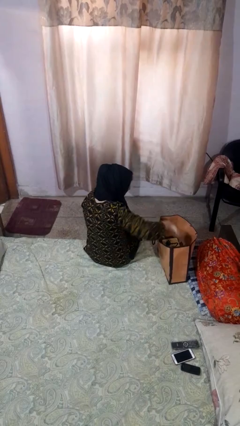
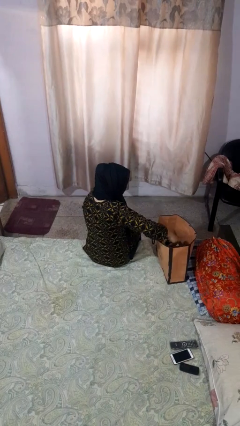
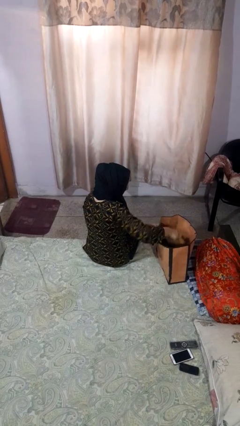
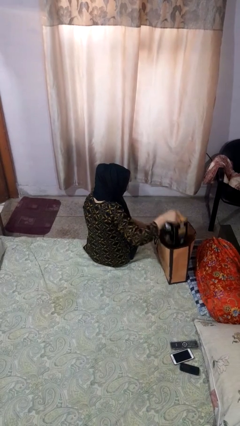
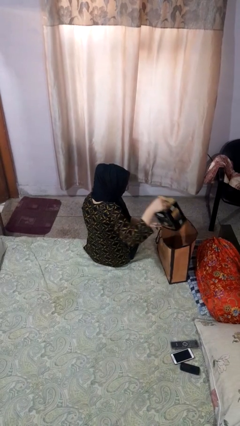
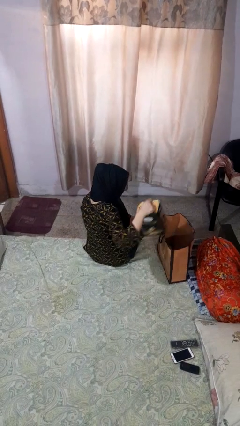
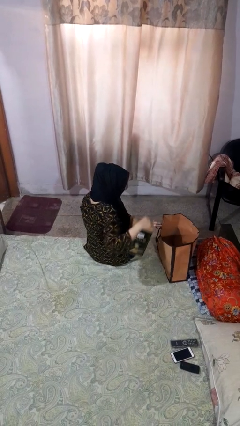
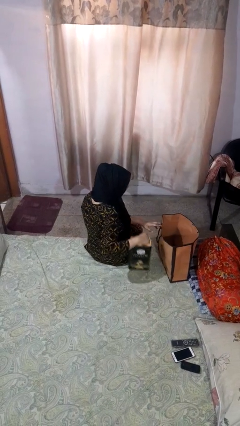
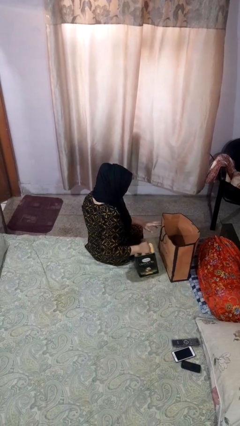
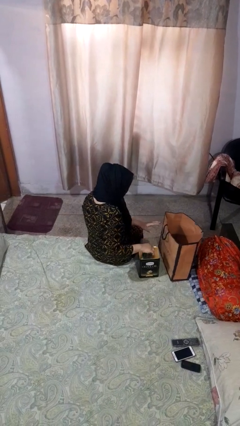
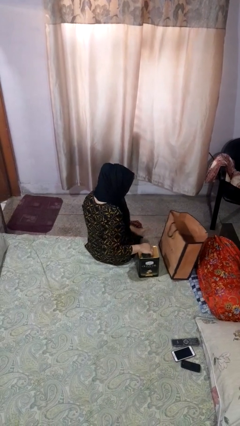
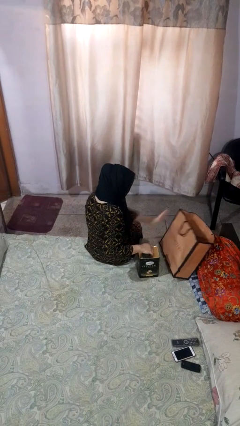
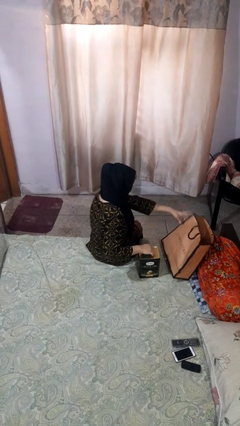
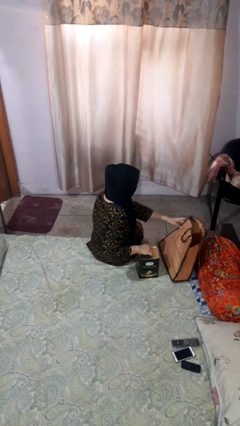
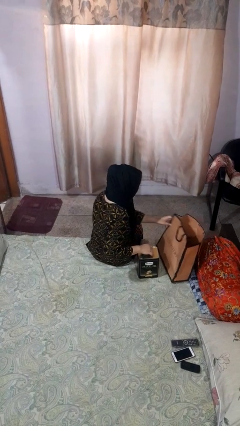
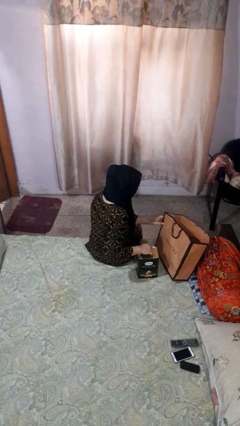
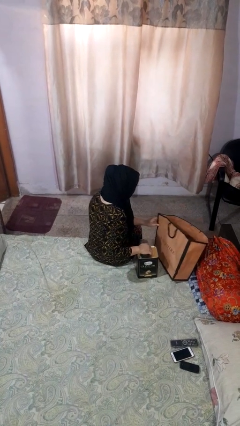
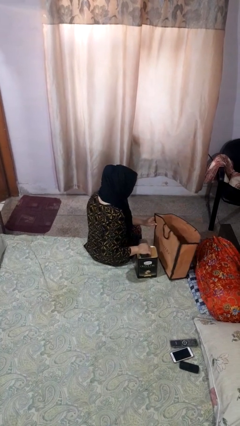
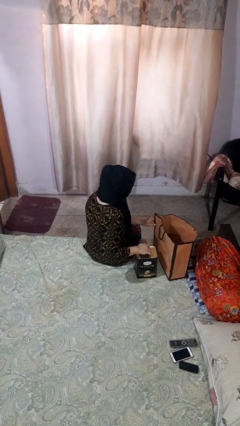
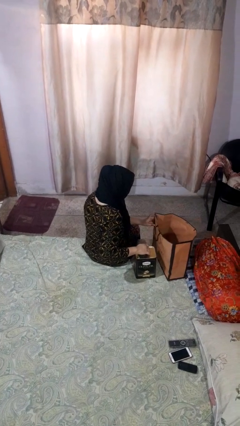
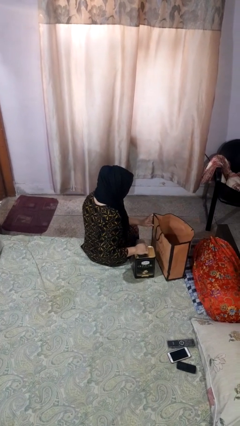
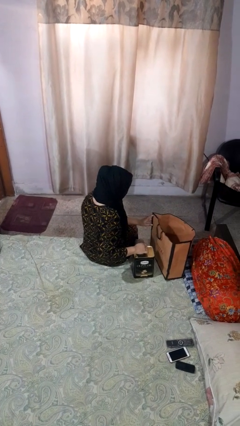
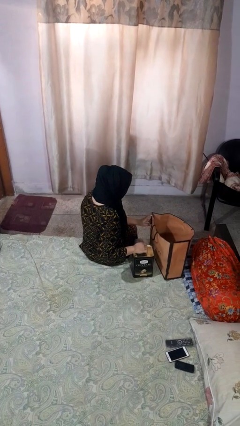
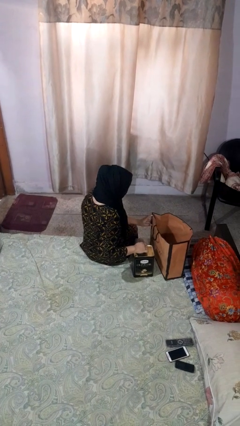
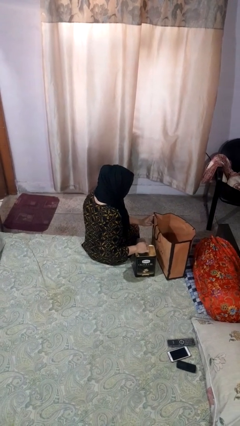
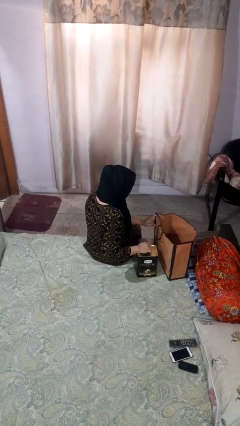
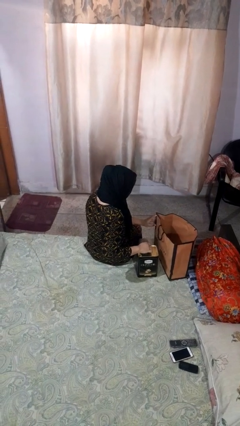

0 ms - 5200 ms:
person takes object from bag

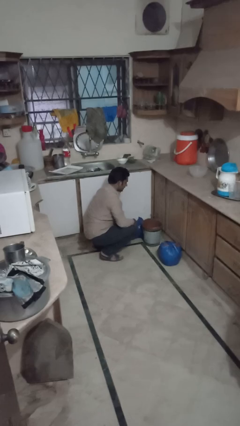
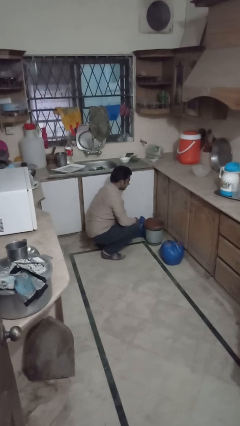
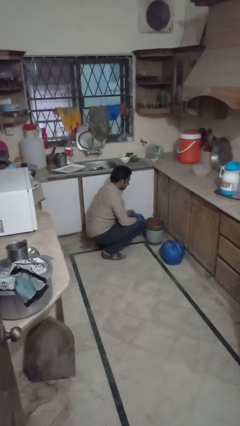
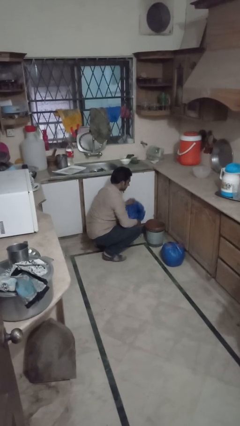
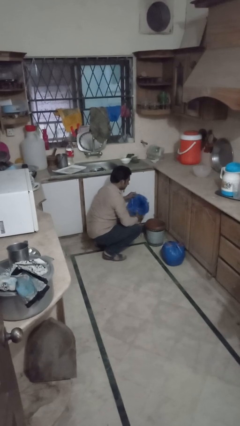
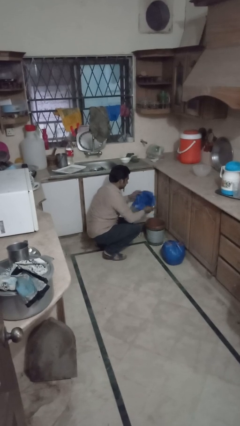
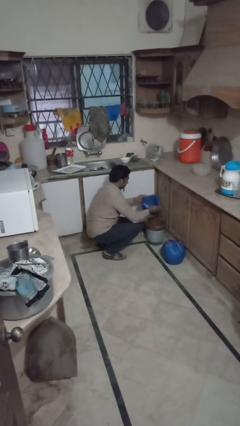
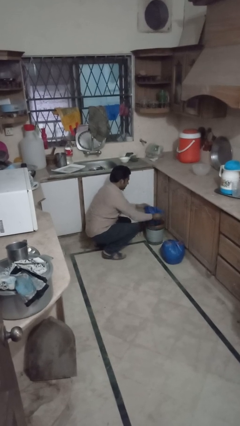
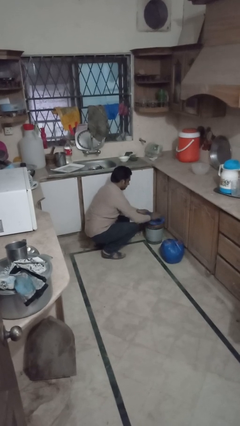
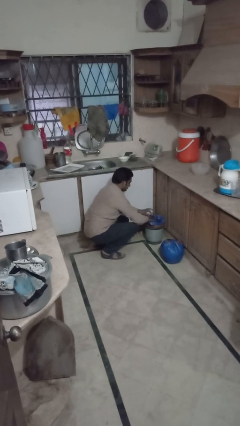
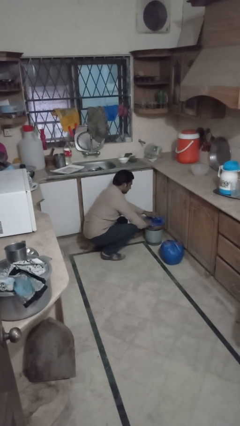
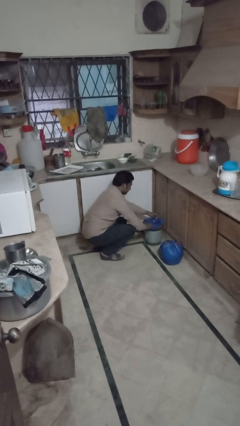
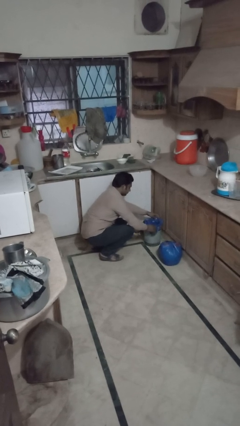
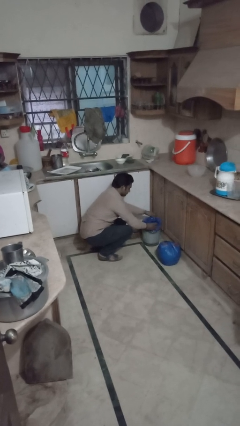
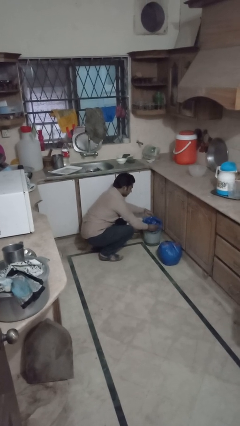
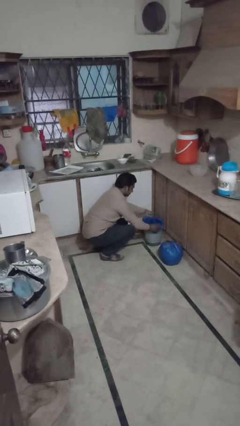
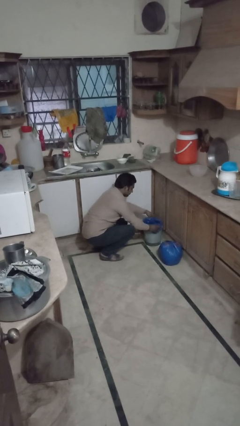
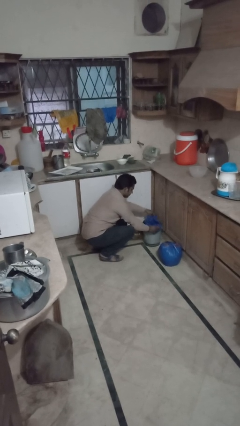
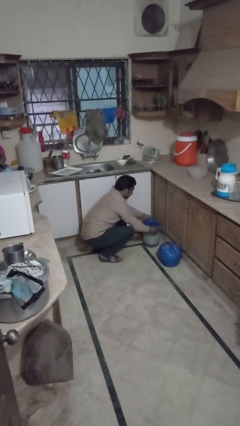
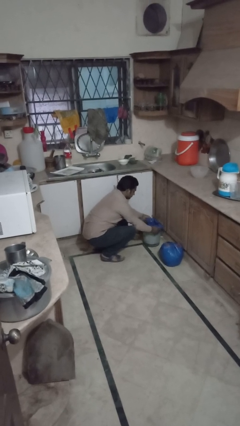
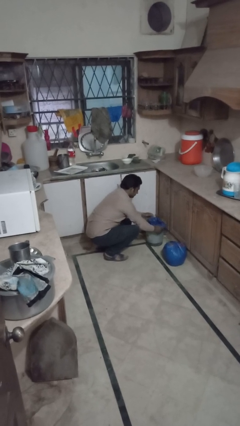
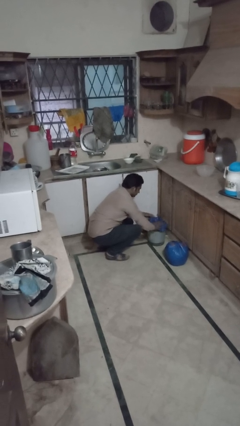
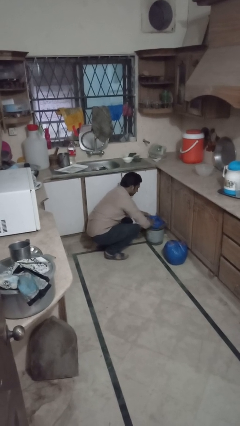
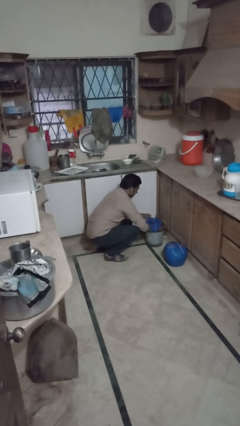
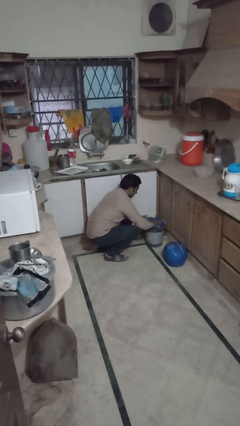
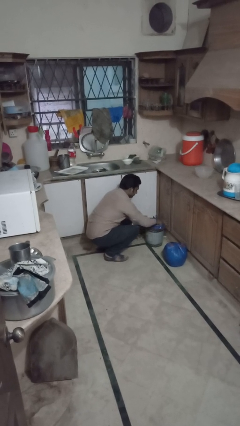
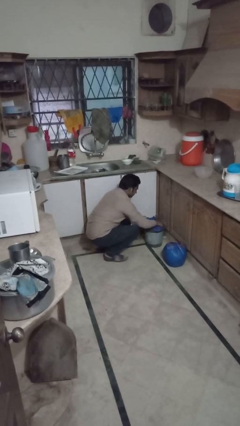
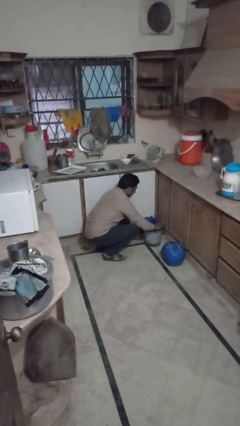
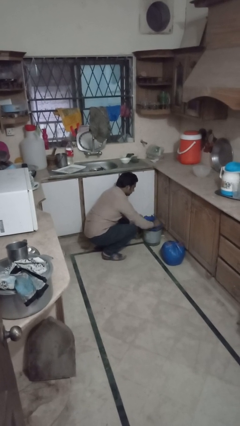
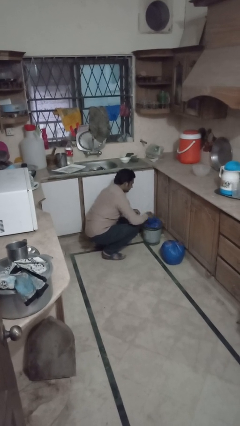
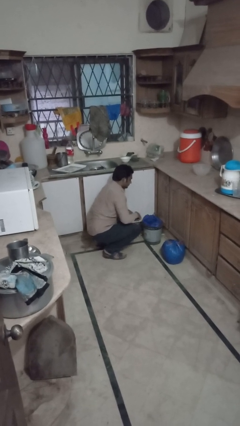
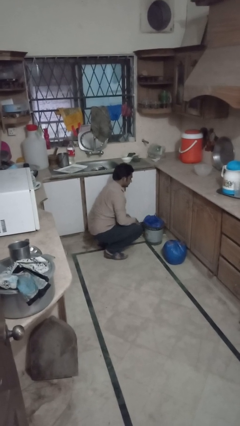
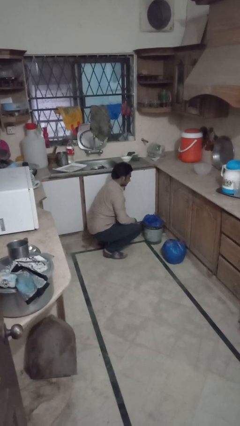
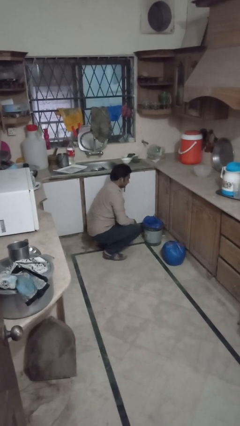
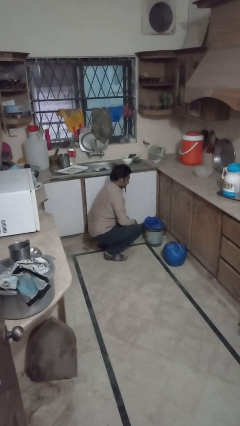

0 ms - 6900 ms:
person inserts trashbag into trashcan

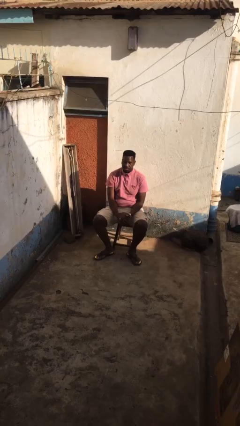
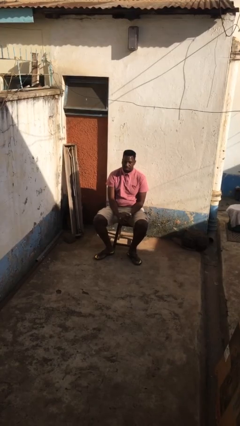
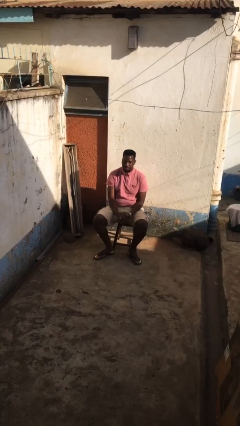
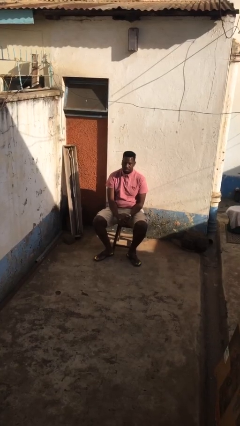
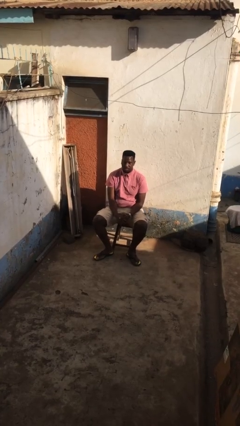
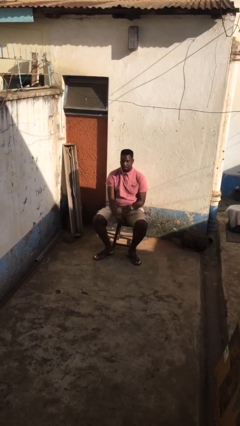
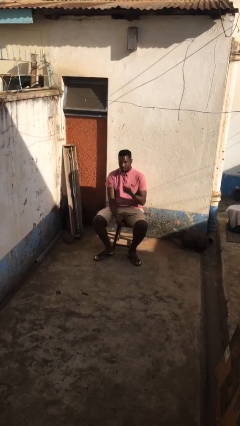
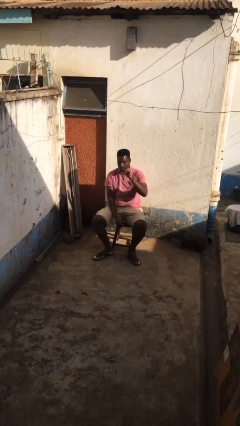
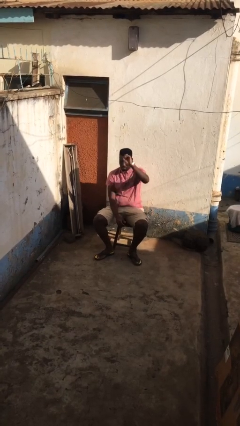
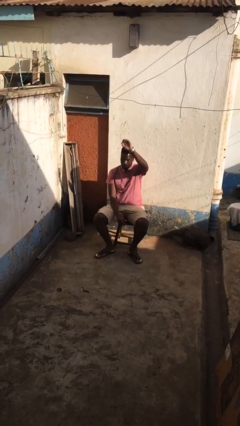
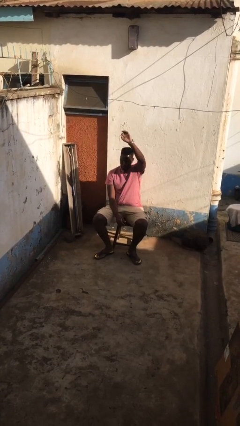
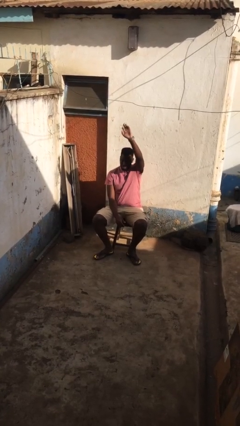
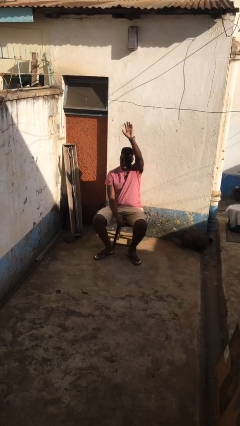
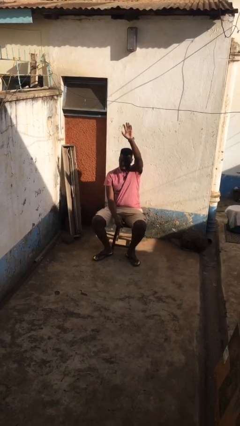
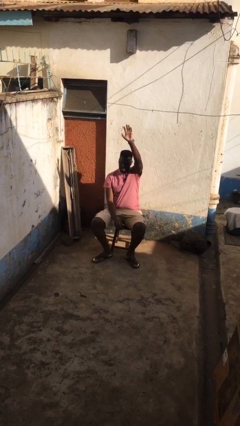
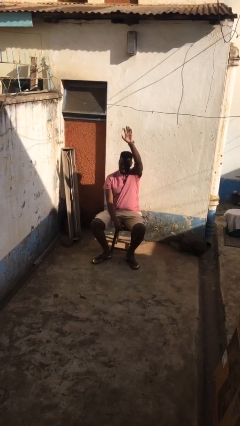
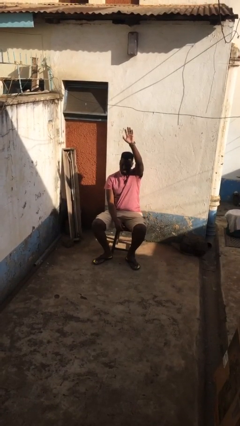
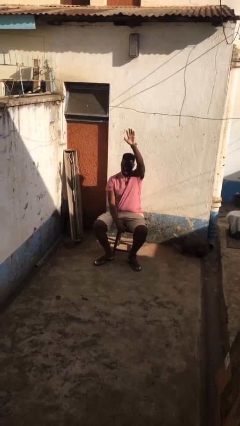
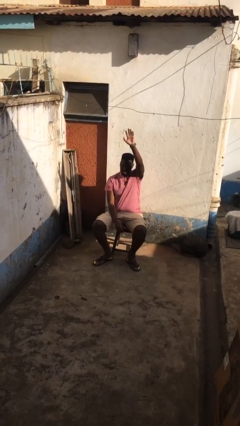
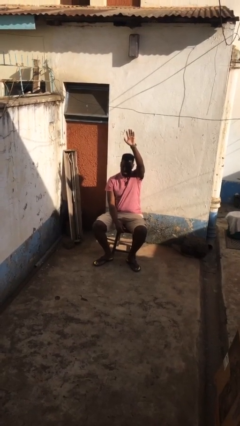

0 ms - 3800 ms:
person gestures raise hand

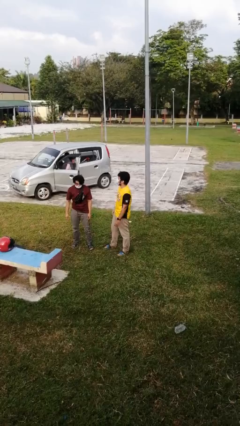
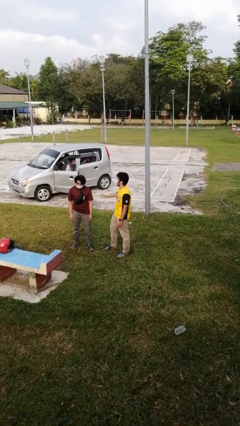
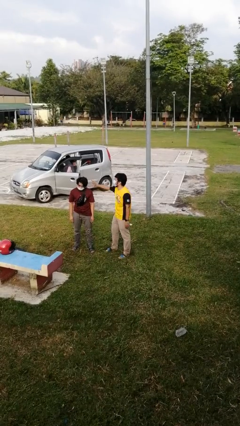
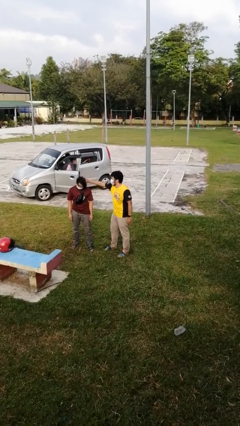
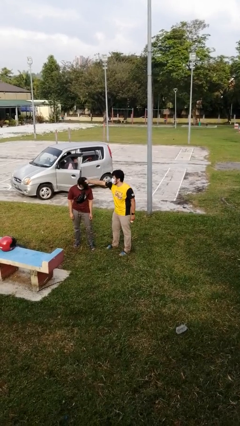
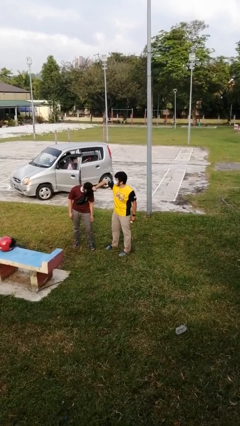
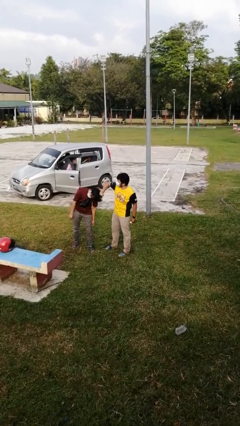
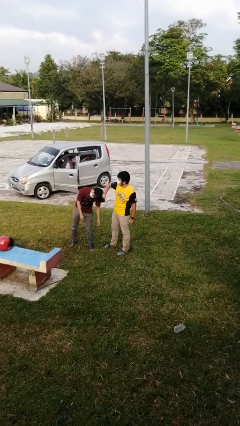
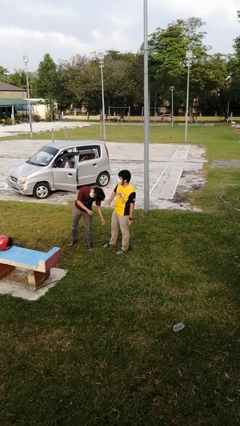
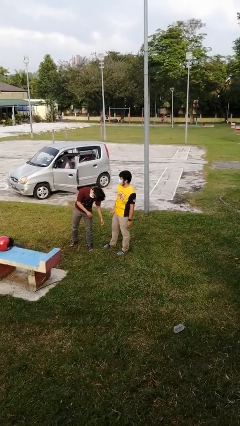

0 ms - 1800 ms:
person grabs person by hair

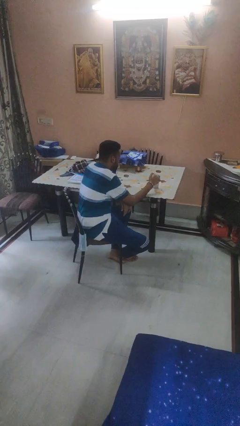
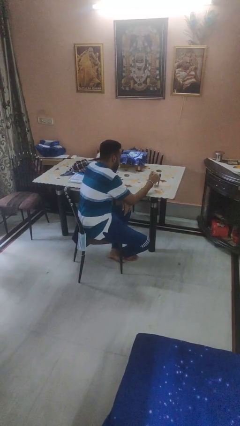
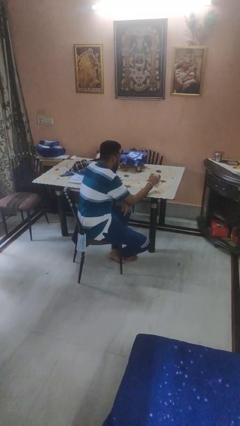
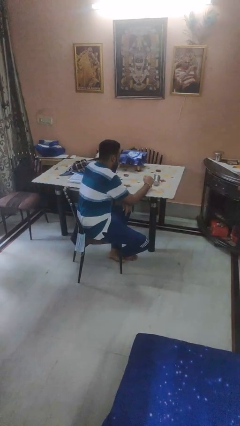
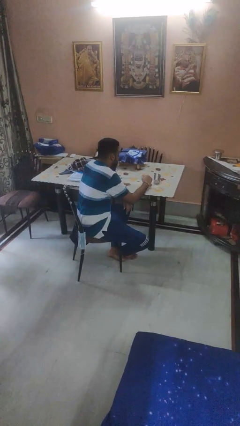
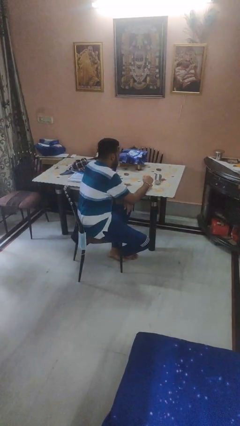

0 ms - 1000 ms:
person knocks over glass
